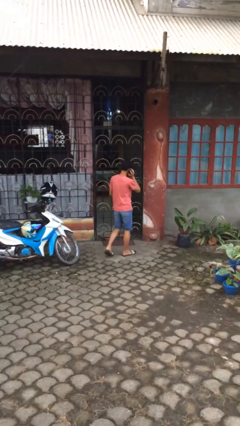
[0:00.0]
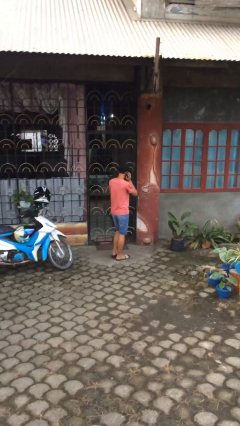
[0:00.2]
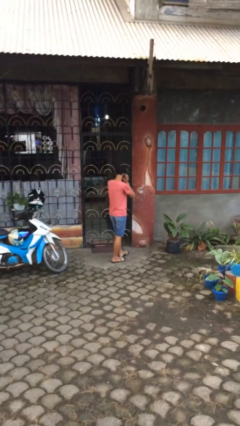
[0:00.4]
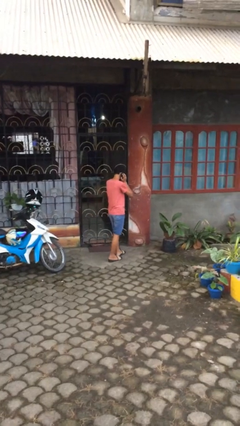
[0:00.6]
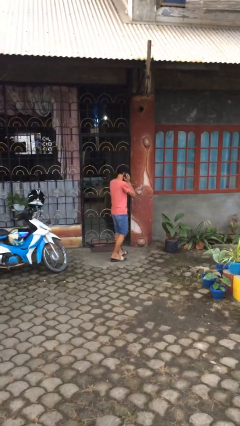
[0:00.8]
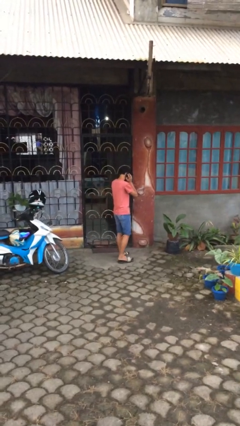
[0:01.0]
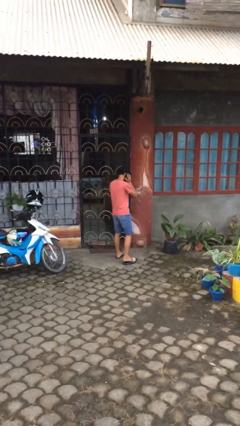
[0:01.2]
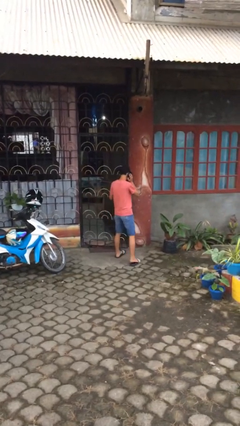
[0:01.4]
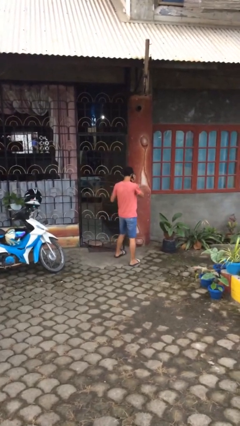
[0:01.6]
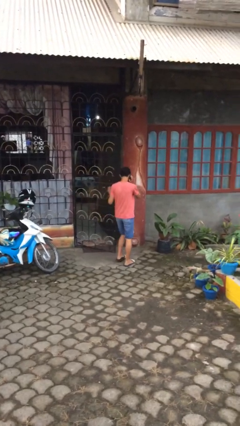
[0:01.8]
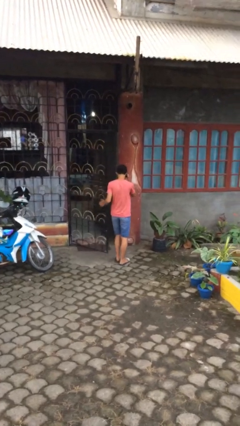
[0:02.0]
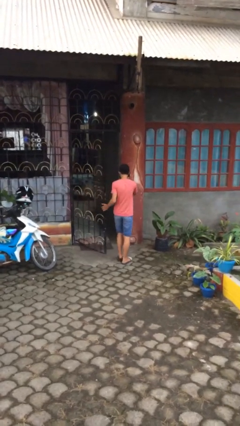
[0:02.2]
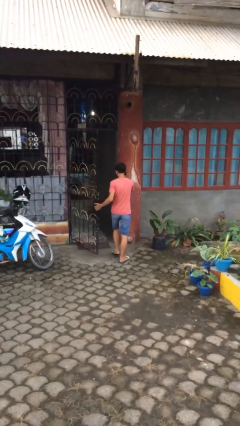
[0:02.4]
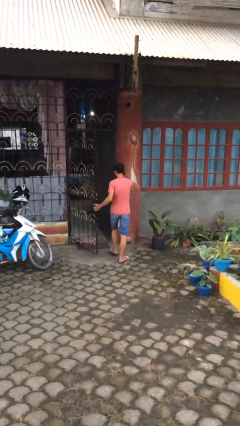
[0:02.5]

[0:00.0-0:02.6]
person opens facility door

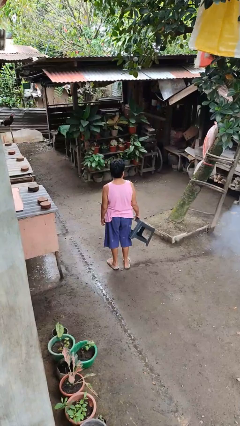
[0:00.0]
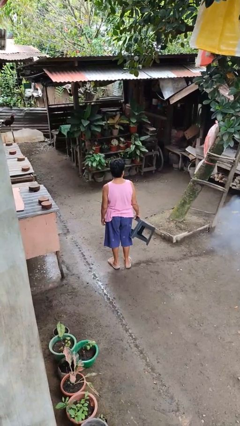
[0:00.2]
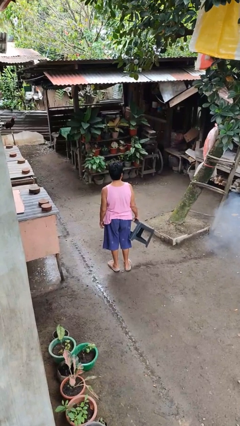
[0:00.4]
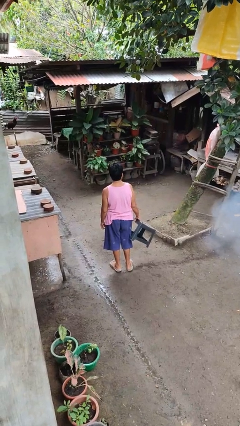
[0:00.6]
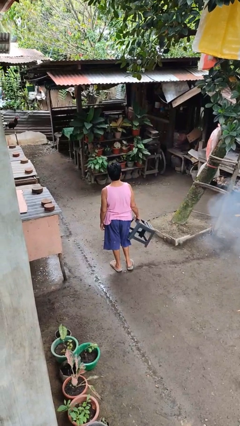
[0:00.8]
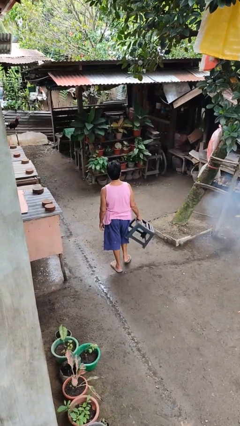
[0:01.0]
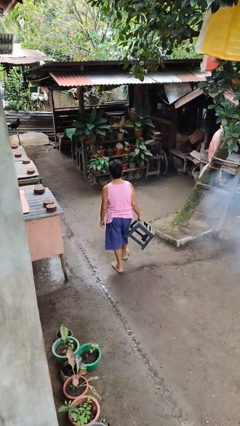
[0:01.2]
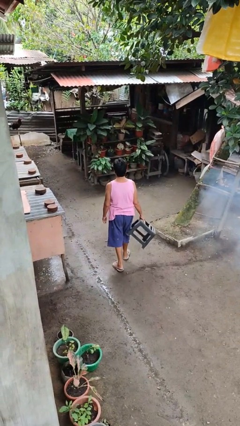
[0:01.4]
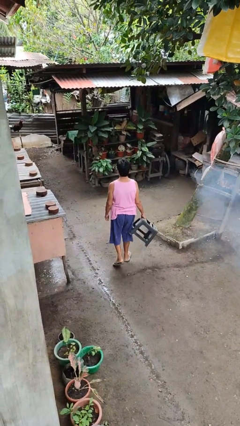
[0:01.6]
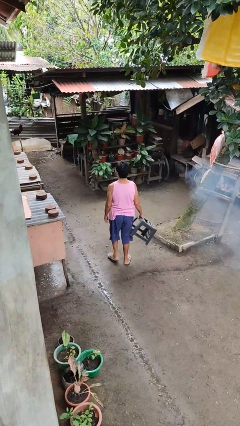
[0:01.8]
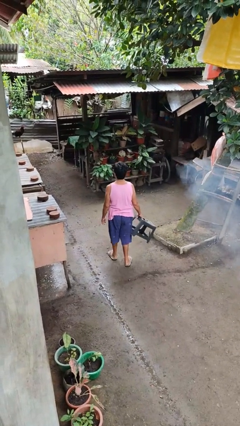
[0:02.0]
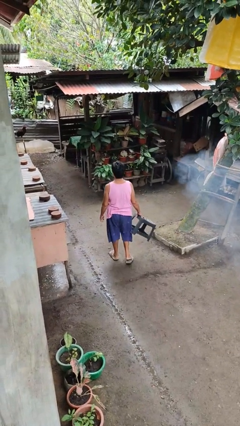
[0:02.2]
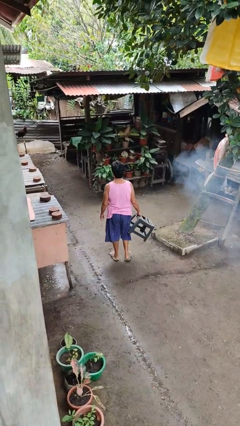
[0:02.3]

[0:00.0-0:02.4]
person carries furniture

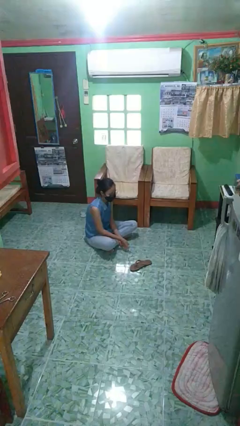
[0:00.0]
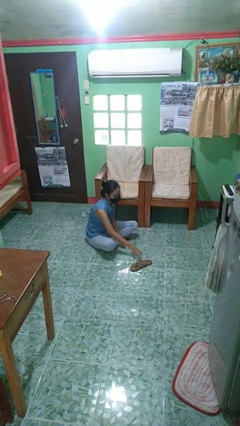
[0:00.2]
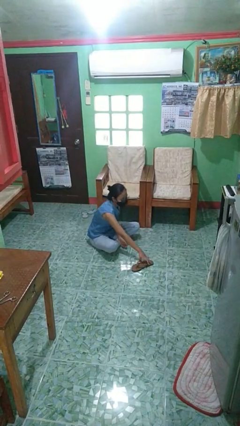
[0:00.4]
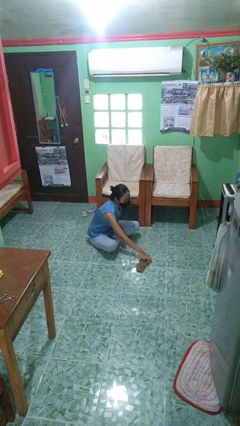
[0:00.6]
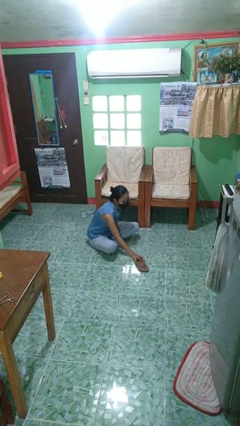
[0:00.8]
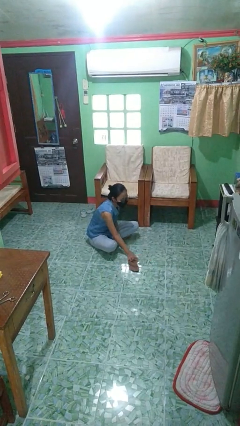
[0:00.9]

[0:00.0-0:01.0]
person picks up object from floor

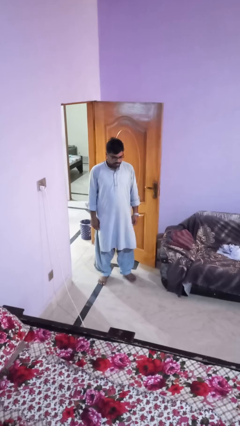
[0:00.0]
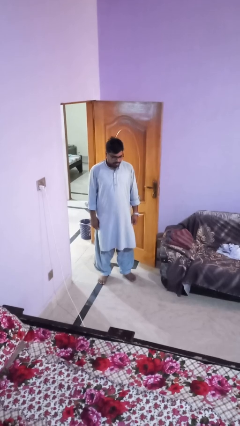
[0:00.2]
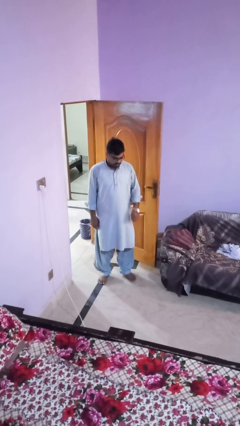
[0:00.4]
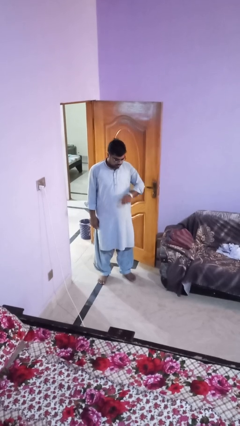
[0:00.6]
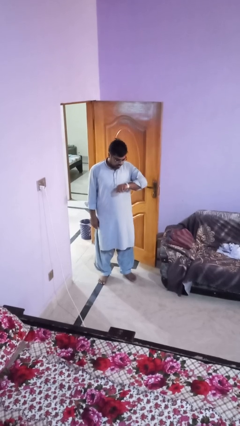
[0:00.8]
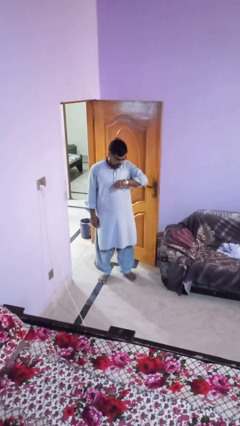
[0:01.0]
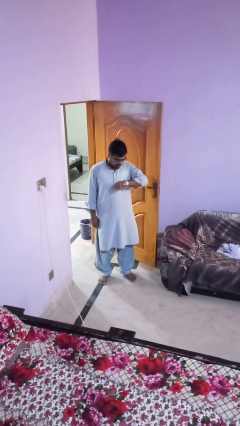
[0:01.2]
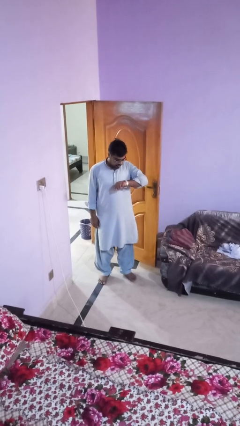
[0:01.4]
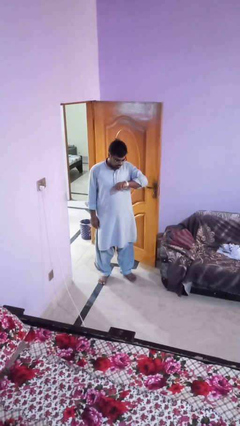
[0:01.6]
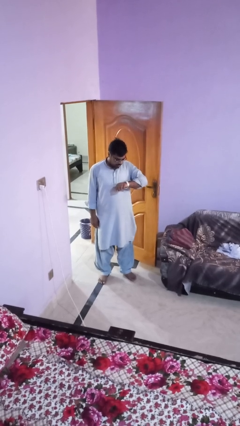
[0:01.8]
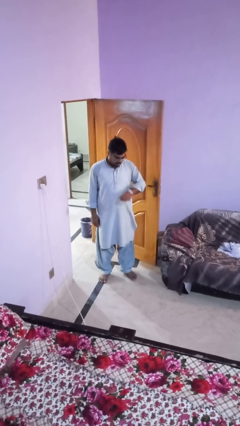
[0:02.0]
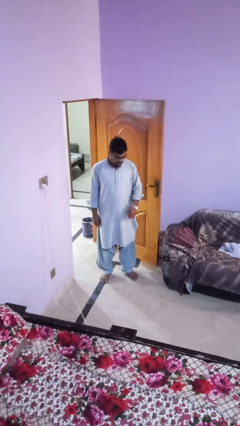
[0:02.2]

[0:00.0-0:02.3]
person looks at wristwatch

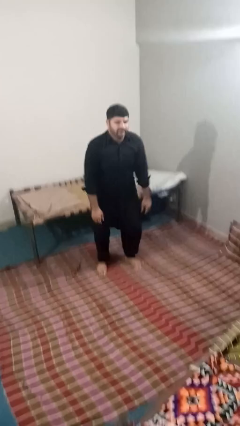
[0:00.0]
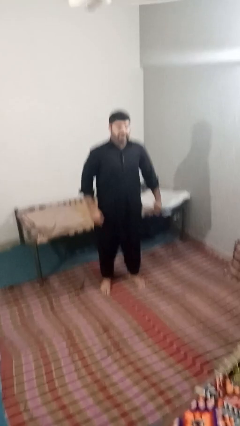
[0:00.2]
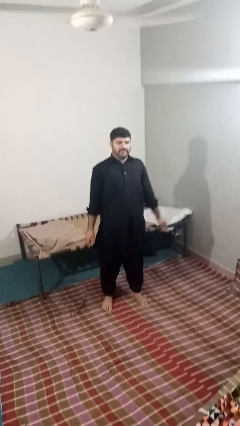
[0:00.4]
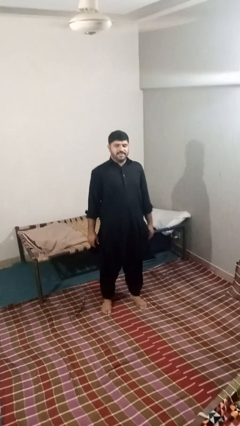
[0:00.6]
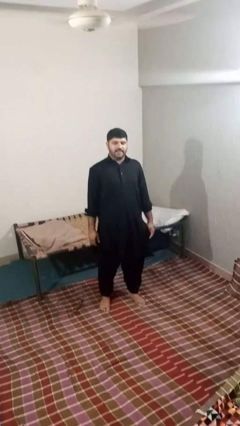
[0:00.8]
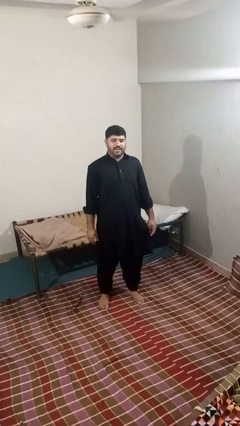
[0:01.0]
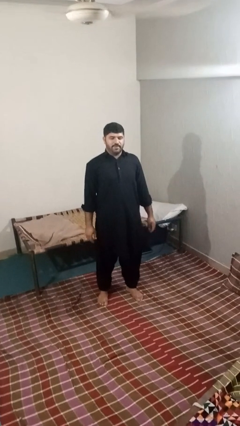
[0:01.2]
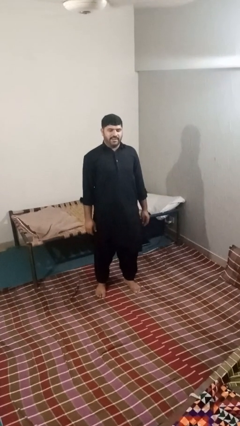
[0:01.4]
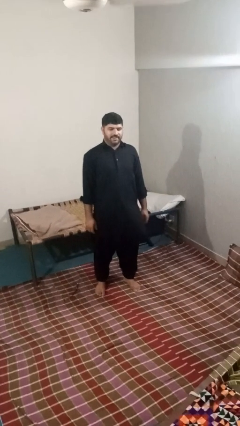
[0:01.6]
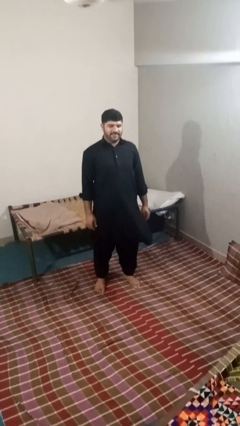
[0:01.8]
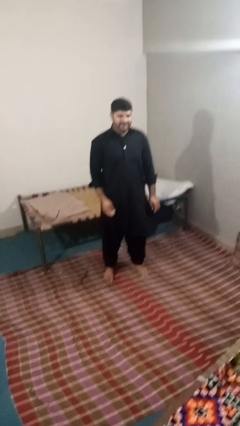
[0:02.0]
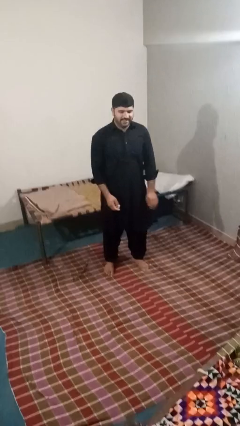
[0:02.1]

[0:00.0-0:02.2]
person stands up

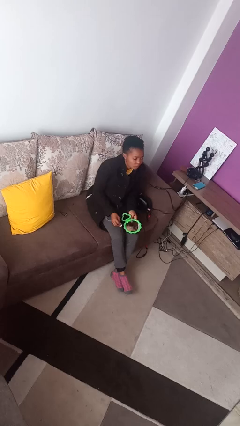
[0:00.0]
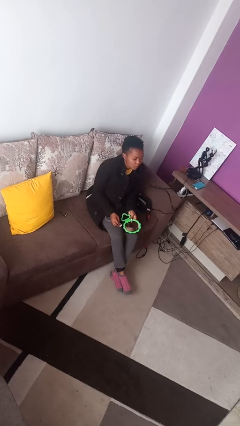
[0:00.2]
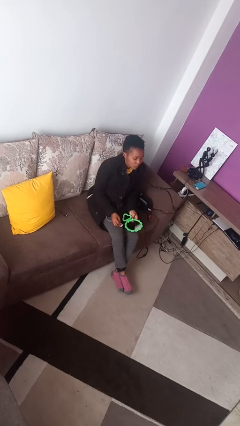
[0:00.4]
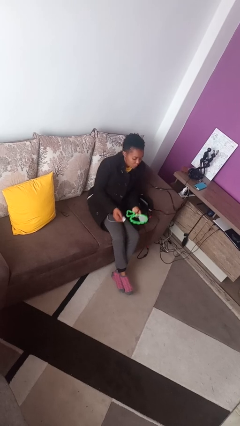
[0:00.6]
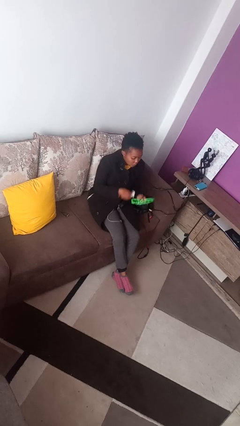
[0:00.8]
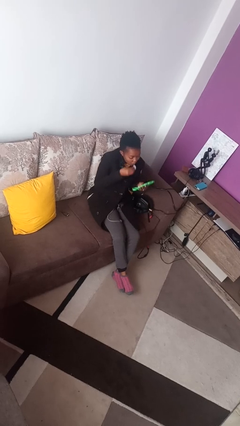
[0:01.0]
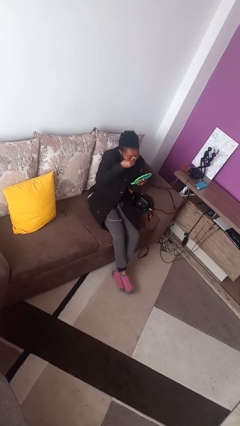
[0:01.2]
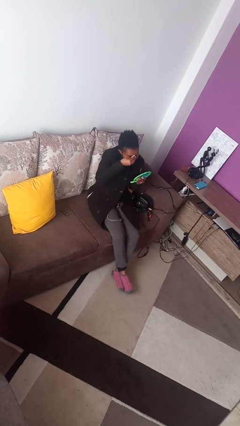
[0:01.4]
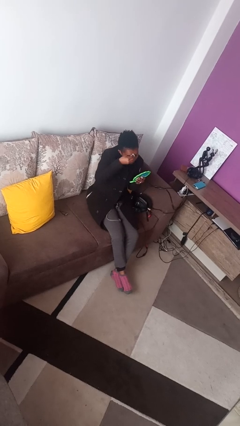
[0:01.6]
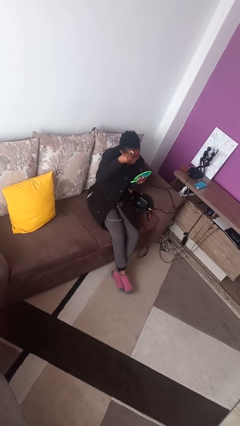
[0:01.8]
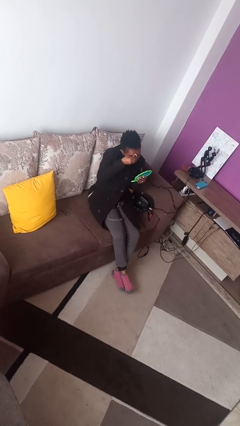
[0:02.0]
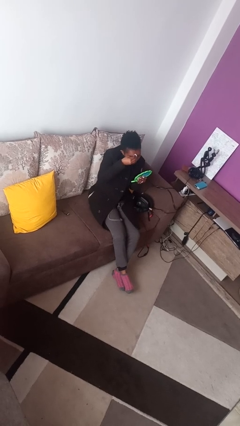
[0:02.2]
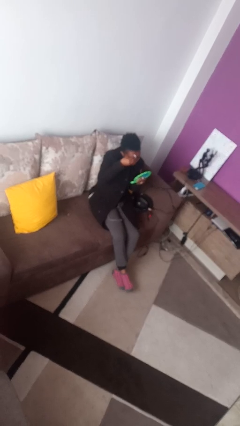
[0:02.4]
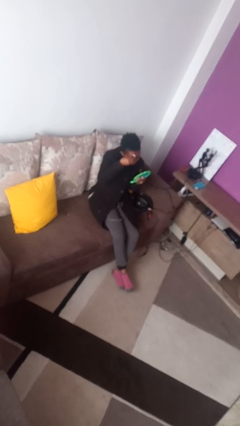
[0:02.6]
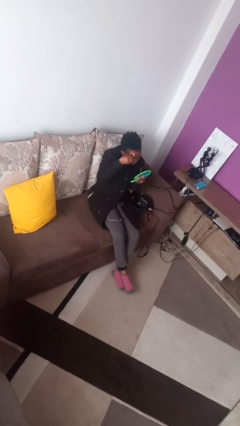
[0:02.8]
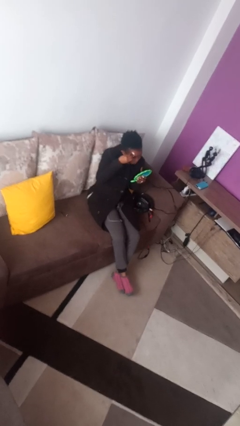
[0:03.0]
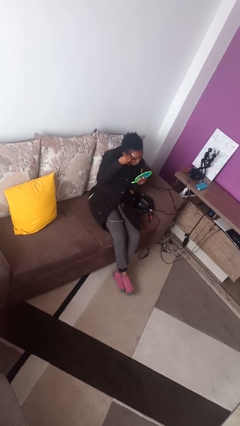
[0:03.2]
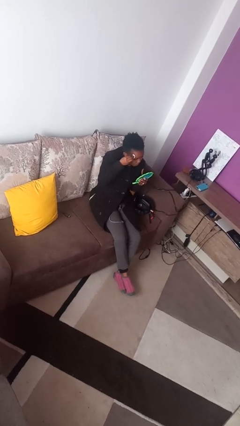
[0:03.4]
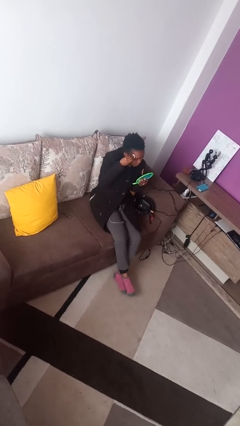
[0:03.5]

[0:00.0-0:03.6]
person applies foundation makeup

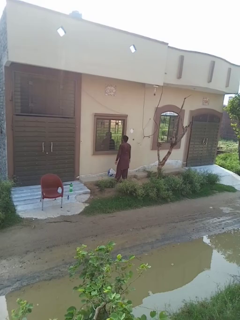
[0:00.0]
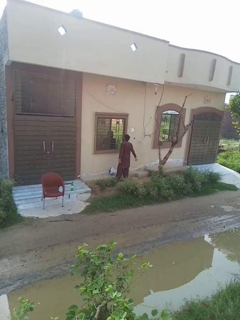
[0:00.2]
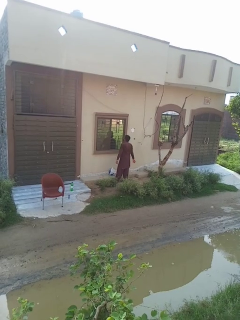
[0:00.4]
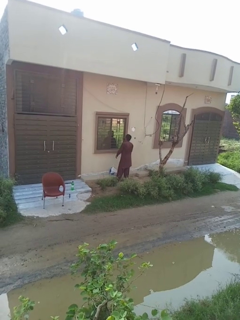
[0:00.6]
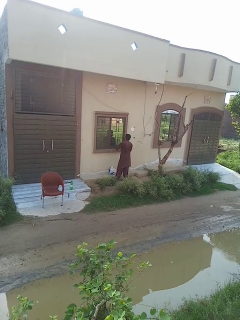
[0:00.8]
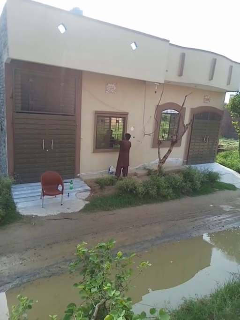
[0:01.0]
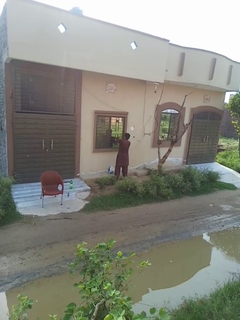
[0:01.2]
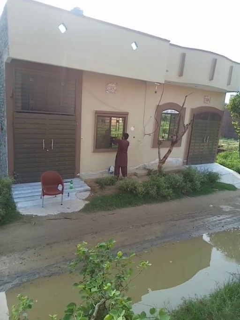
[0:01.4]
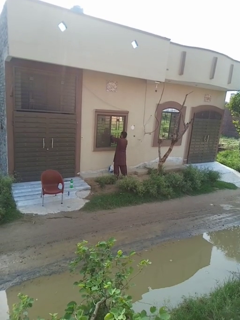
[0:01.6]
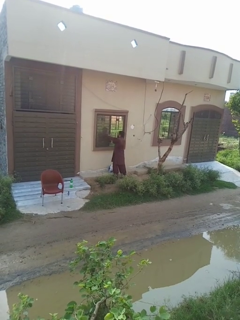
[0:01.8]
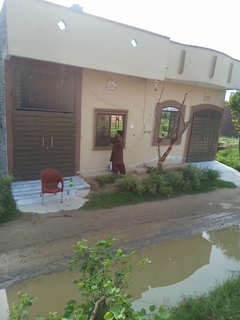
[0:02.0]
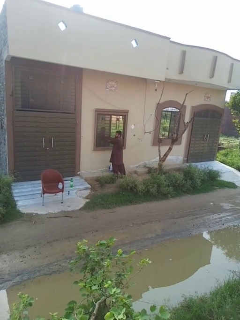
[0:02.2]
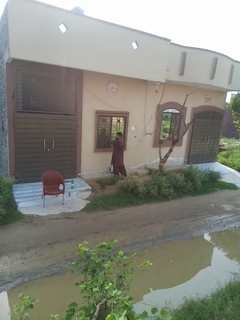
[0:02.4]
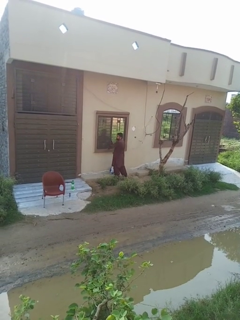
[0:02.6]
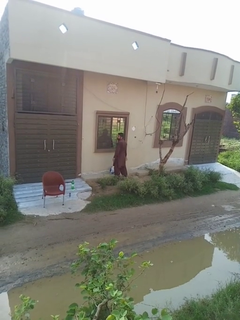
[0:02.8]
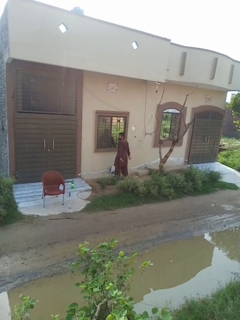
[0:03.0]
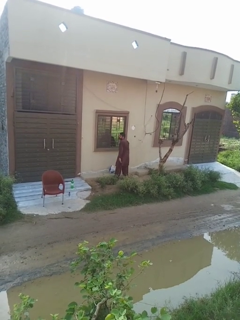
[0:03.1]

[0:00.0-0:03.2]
person closes home window

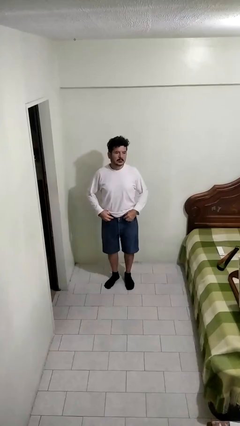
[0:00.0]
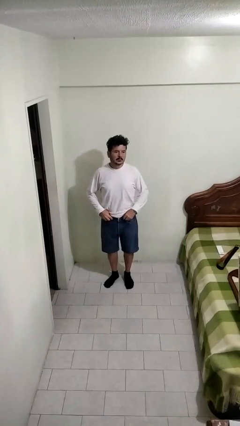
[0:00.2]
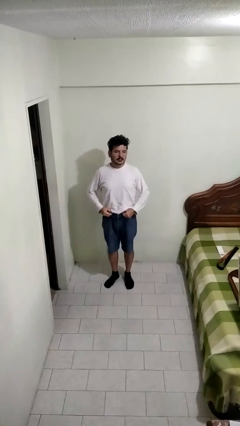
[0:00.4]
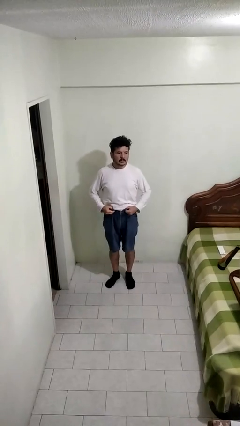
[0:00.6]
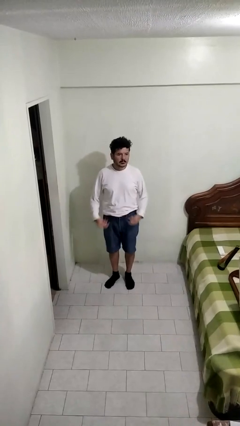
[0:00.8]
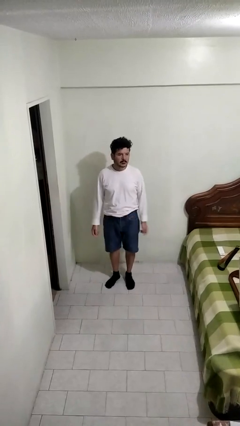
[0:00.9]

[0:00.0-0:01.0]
person hikes up pants
